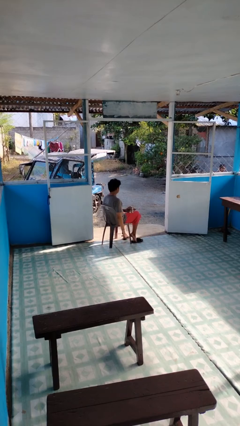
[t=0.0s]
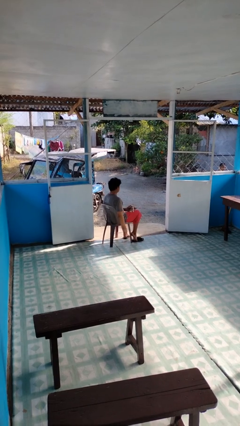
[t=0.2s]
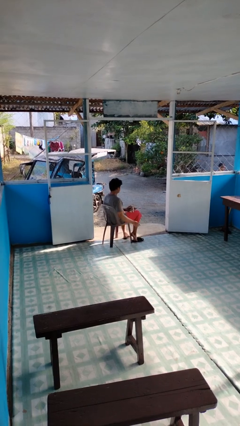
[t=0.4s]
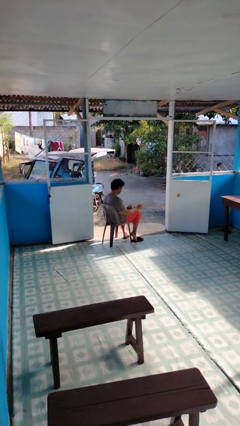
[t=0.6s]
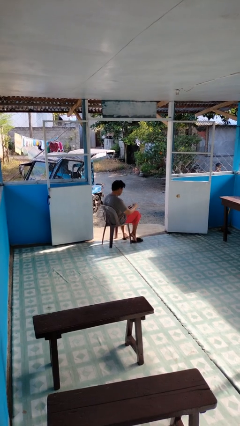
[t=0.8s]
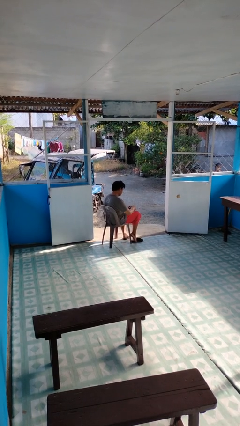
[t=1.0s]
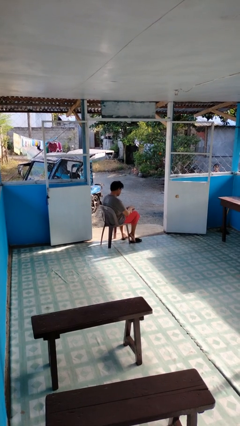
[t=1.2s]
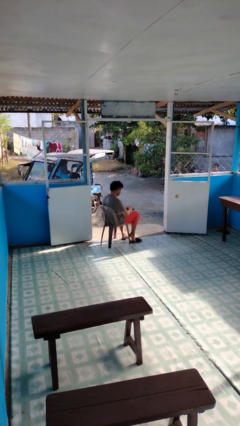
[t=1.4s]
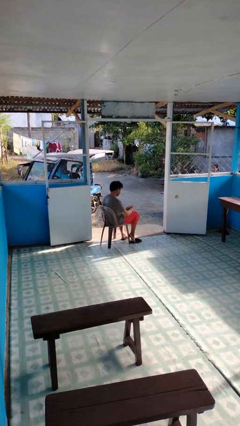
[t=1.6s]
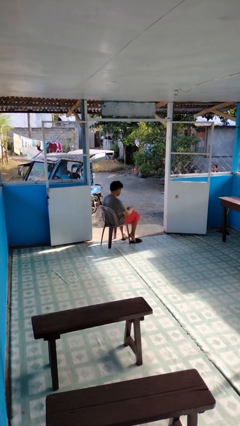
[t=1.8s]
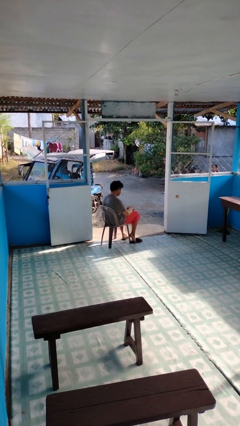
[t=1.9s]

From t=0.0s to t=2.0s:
person pets cat

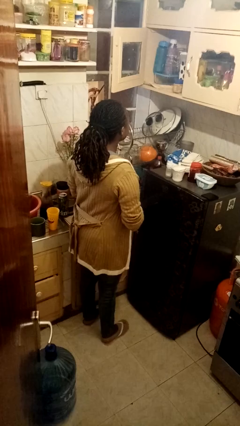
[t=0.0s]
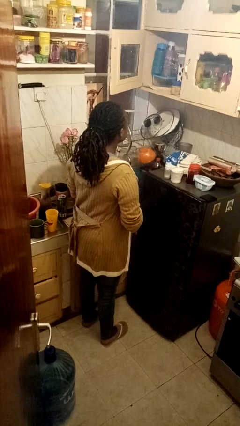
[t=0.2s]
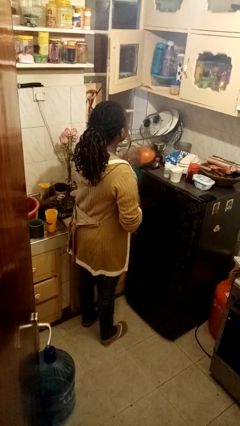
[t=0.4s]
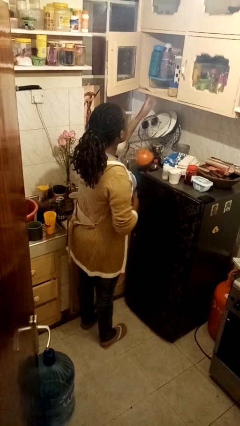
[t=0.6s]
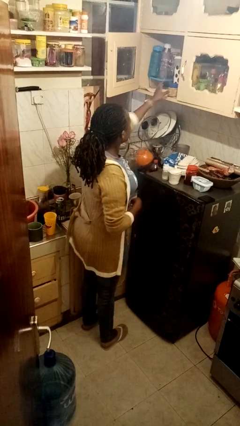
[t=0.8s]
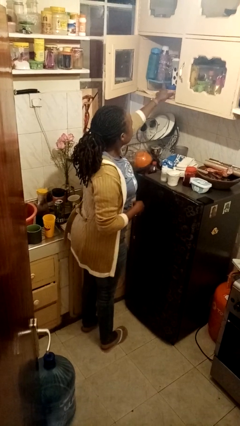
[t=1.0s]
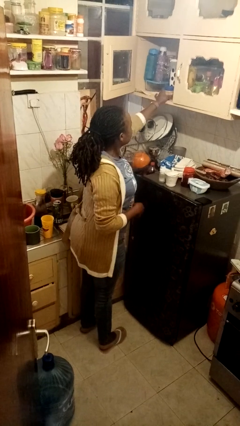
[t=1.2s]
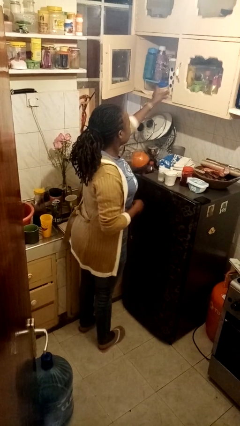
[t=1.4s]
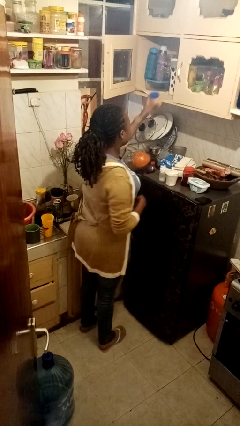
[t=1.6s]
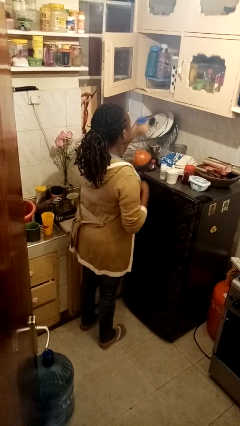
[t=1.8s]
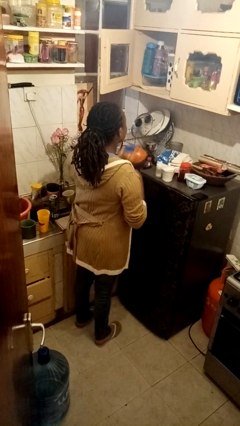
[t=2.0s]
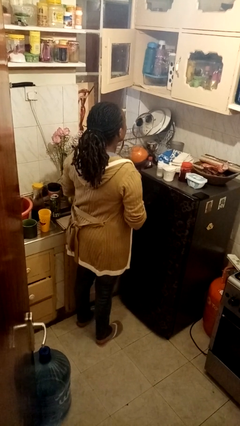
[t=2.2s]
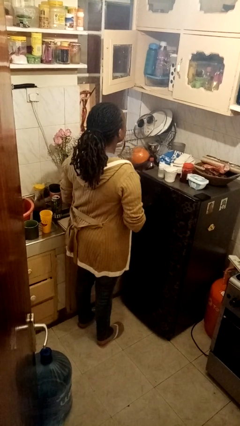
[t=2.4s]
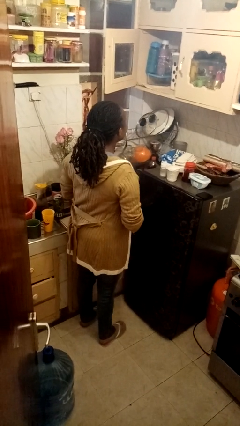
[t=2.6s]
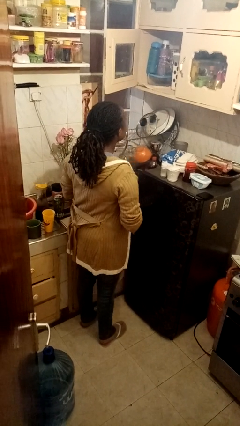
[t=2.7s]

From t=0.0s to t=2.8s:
person picks up object from cabinet

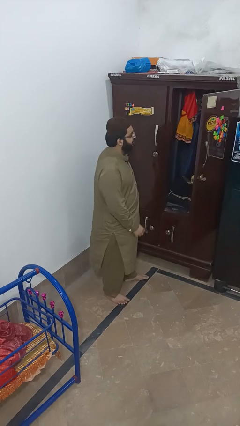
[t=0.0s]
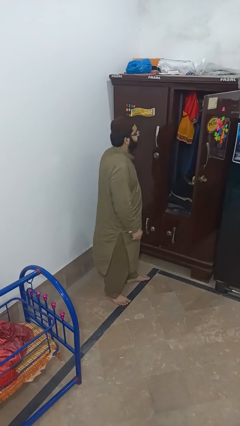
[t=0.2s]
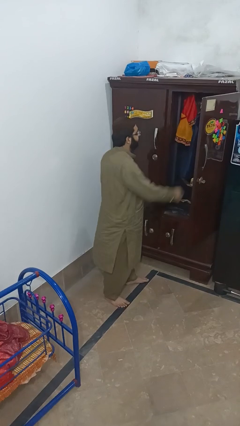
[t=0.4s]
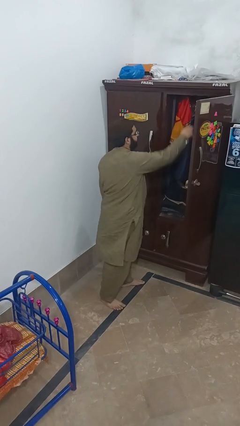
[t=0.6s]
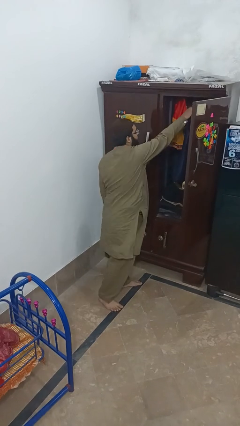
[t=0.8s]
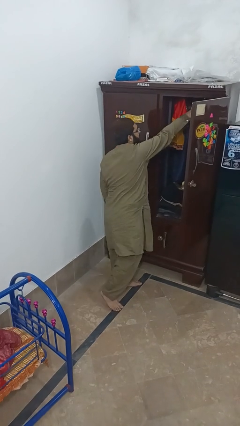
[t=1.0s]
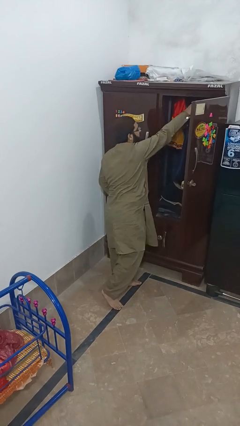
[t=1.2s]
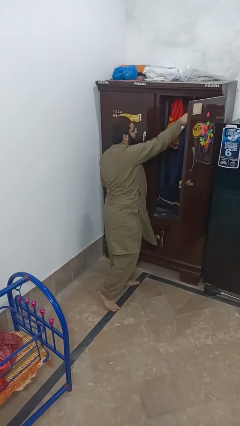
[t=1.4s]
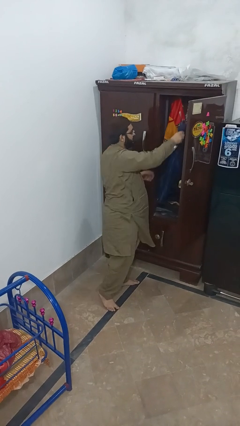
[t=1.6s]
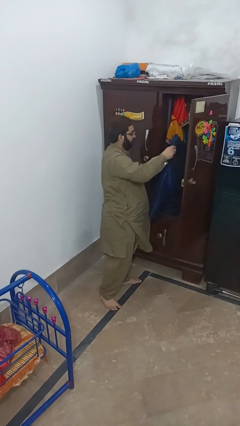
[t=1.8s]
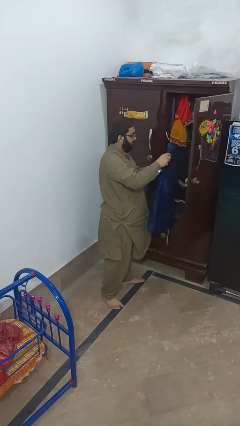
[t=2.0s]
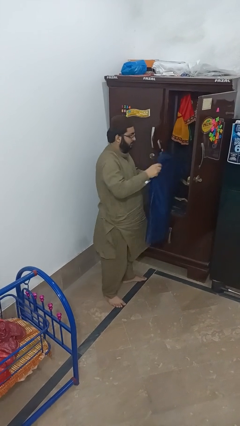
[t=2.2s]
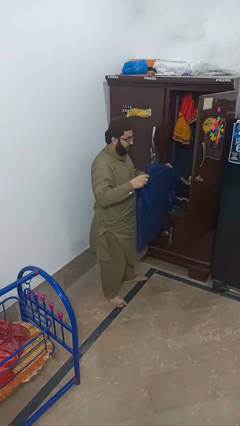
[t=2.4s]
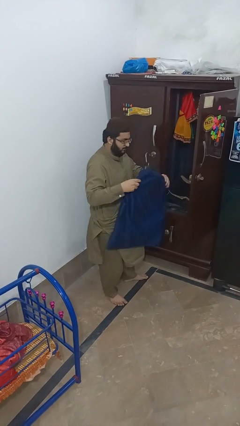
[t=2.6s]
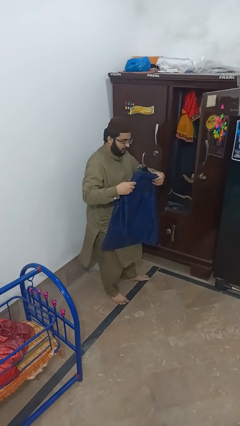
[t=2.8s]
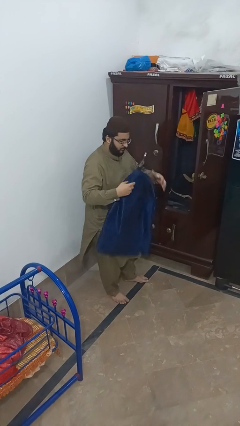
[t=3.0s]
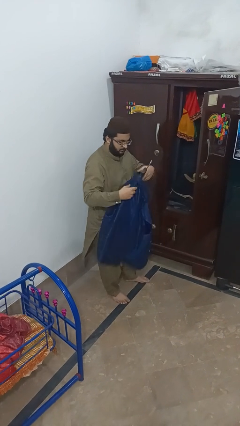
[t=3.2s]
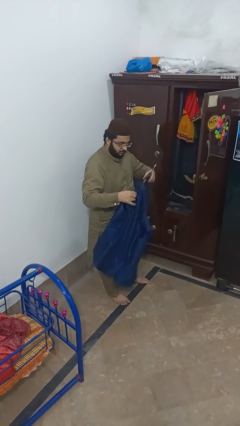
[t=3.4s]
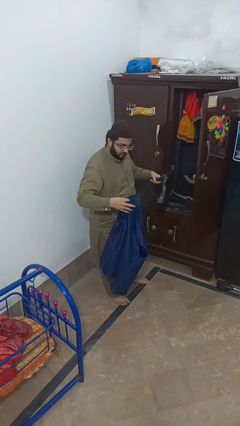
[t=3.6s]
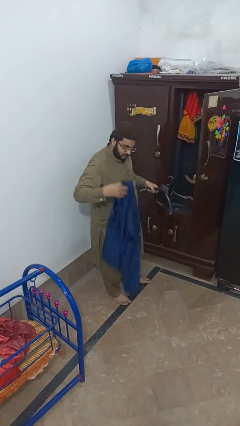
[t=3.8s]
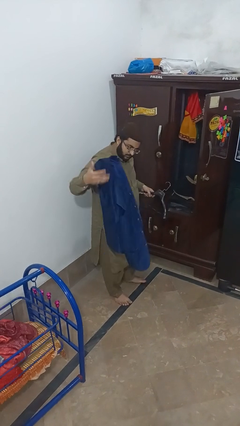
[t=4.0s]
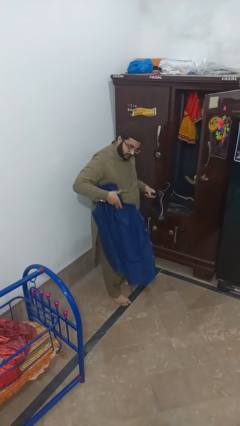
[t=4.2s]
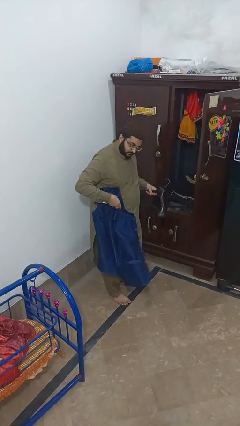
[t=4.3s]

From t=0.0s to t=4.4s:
person takes clothes from closet

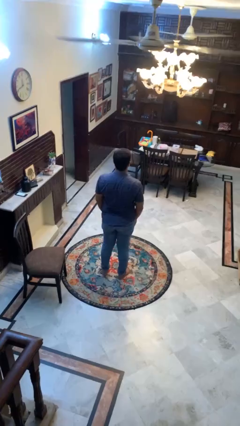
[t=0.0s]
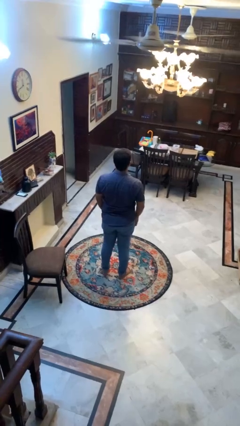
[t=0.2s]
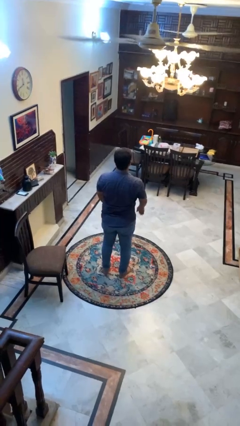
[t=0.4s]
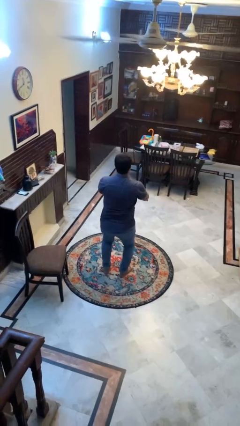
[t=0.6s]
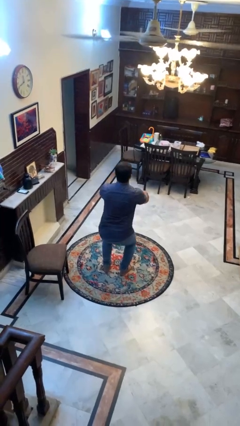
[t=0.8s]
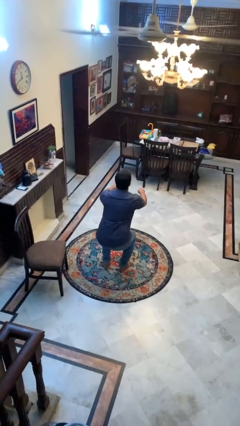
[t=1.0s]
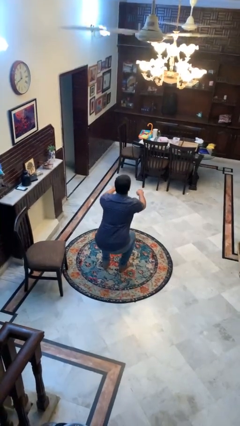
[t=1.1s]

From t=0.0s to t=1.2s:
person squats

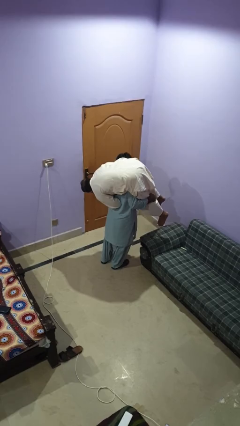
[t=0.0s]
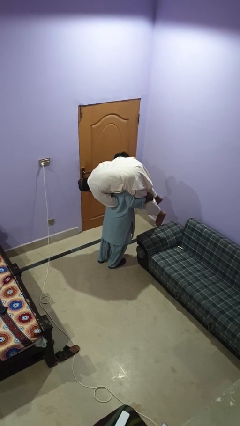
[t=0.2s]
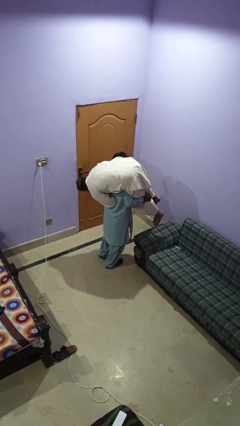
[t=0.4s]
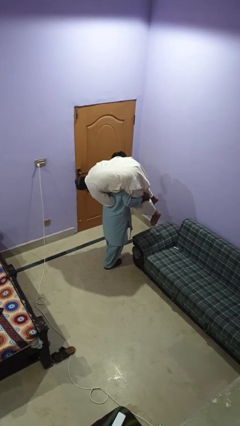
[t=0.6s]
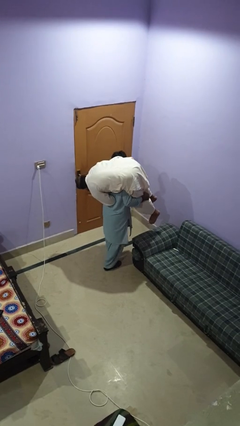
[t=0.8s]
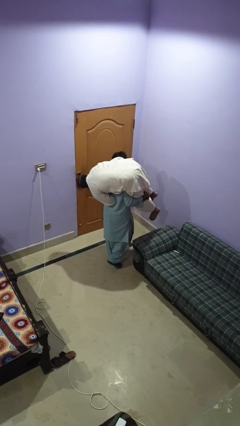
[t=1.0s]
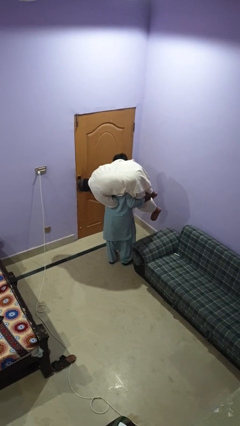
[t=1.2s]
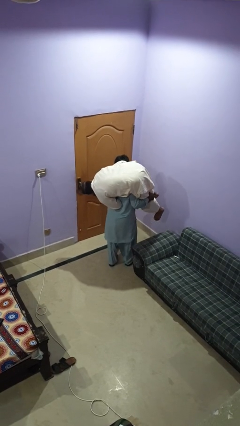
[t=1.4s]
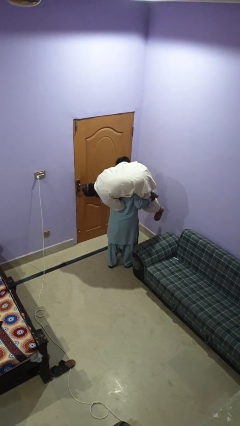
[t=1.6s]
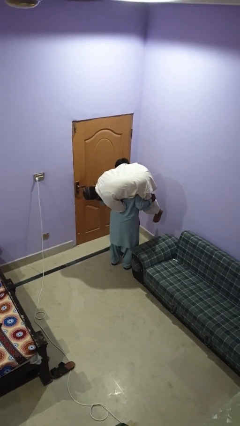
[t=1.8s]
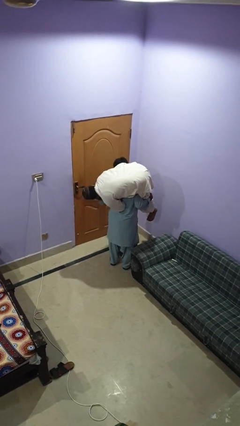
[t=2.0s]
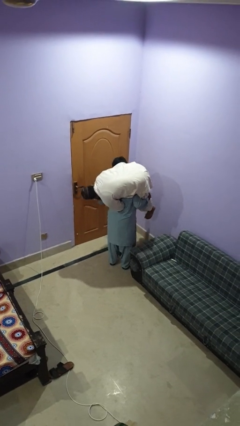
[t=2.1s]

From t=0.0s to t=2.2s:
person carries person on shoulders

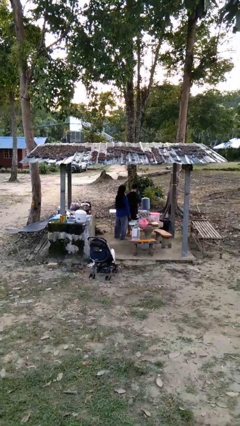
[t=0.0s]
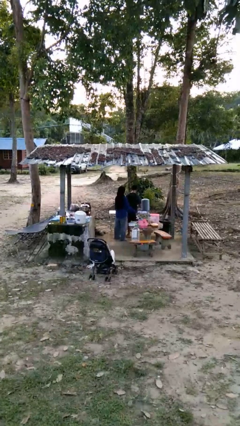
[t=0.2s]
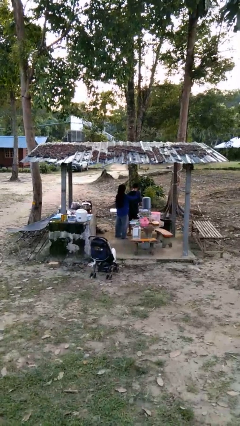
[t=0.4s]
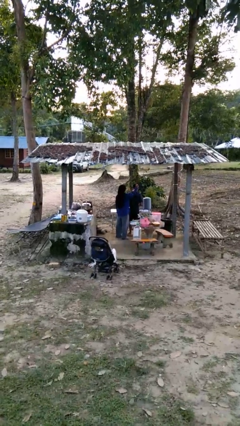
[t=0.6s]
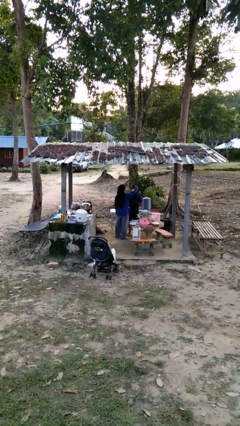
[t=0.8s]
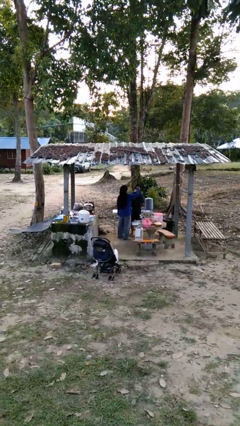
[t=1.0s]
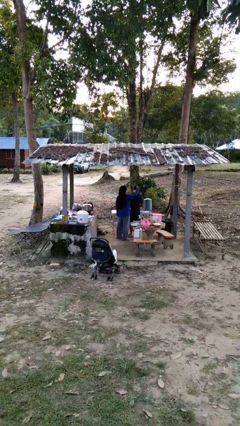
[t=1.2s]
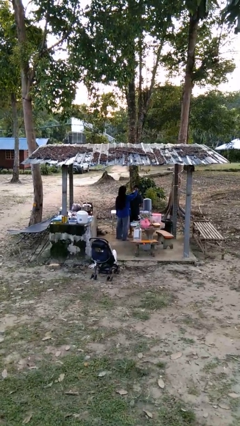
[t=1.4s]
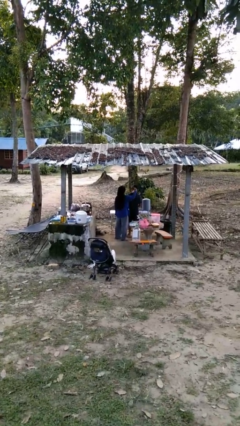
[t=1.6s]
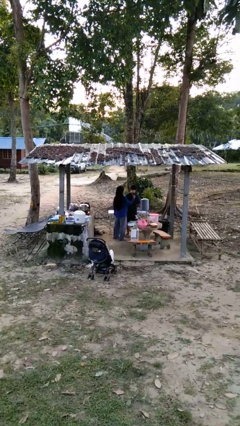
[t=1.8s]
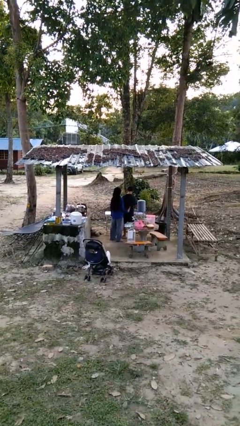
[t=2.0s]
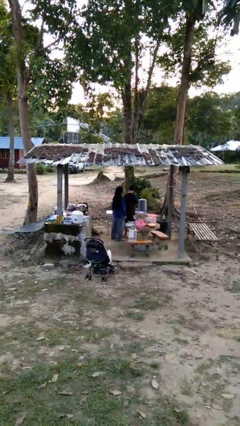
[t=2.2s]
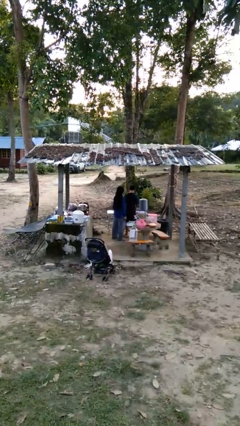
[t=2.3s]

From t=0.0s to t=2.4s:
person brushes hair of person

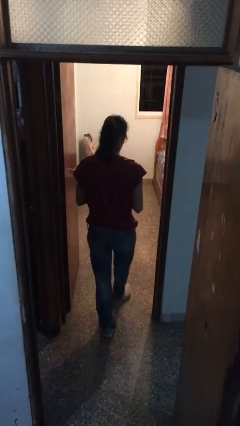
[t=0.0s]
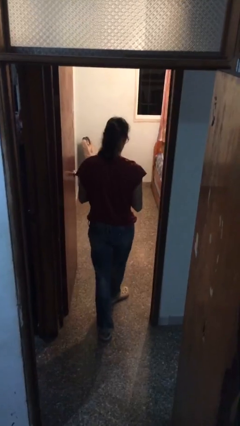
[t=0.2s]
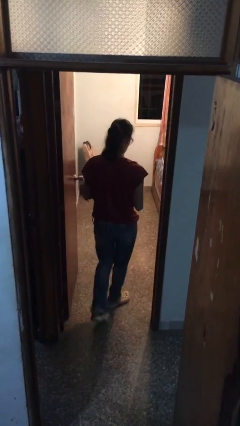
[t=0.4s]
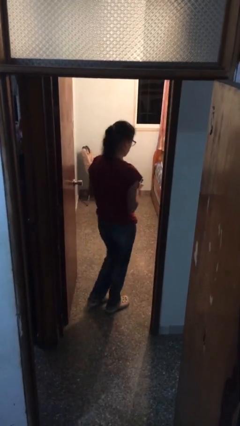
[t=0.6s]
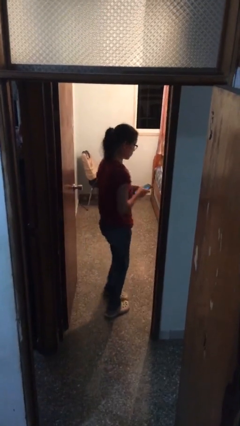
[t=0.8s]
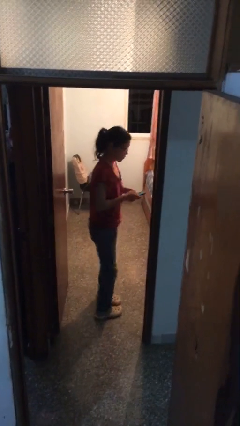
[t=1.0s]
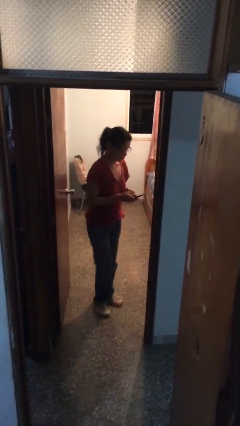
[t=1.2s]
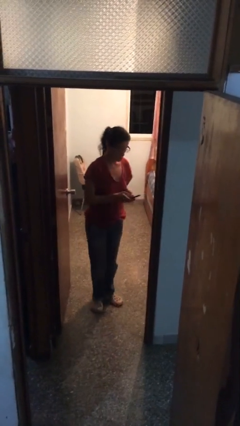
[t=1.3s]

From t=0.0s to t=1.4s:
person exits scene through structure

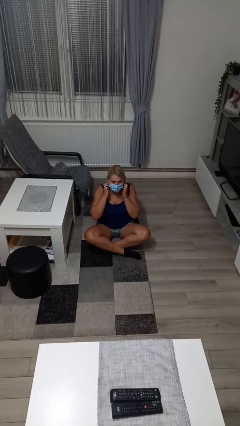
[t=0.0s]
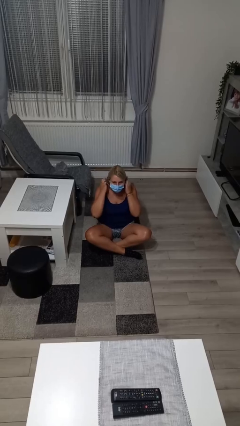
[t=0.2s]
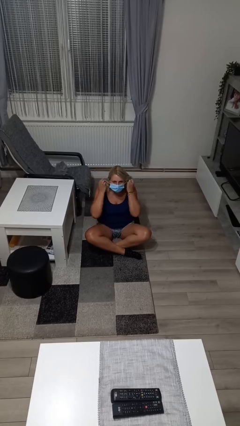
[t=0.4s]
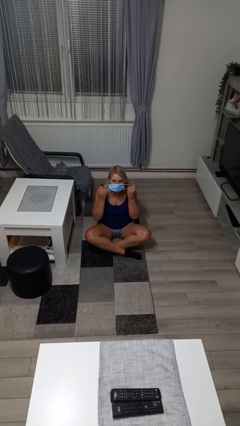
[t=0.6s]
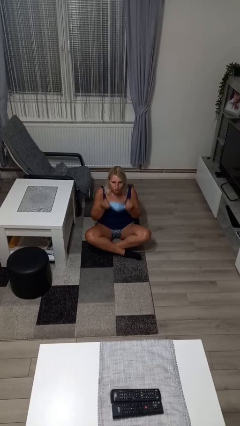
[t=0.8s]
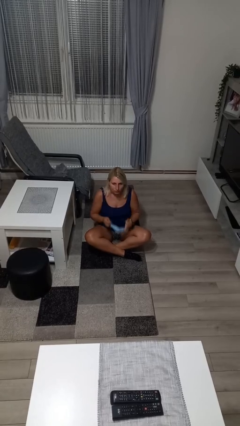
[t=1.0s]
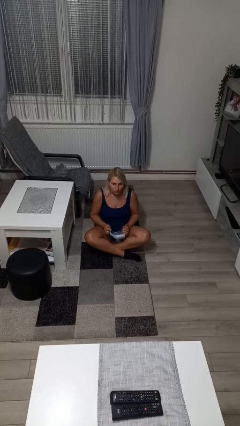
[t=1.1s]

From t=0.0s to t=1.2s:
person takes off facemask
